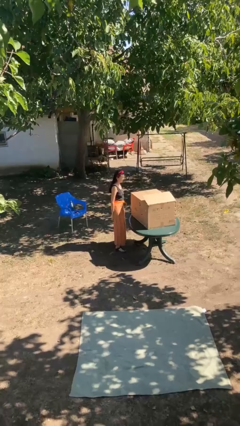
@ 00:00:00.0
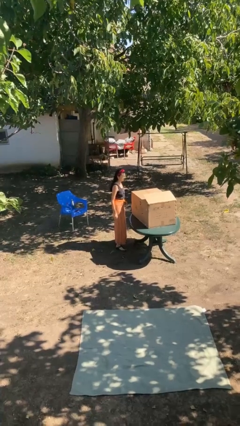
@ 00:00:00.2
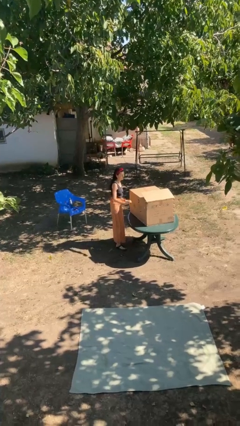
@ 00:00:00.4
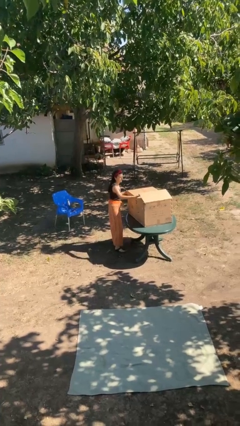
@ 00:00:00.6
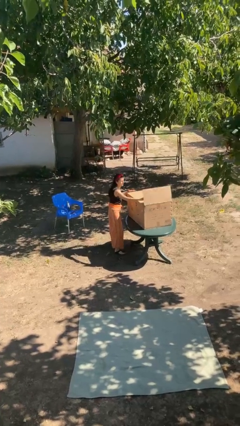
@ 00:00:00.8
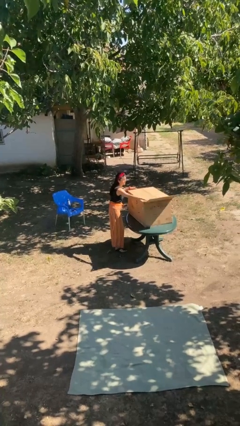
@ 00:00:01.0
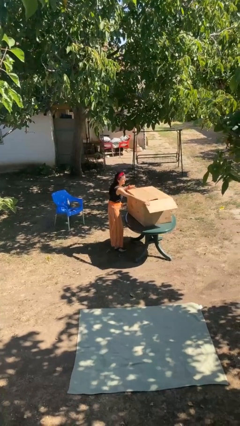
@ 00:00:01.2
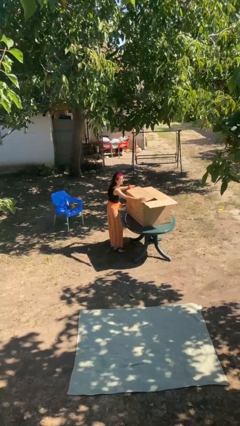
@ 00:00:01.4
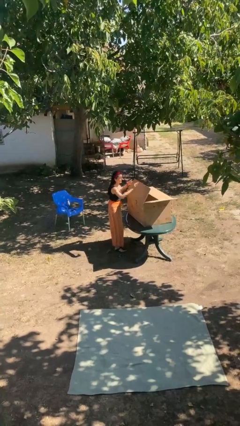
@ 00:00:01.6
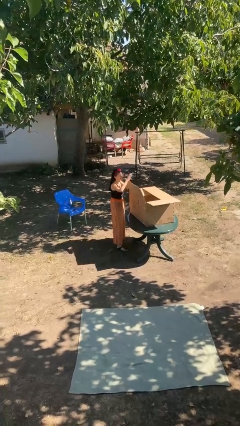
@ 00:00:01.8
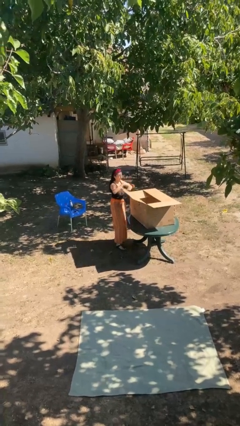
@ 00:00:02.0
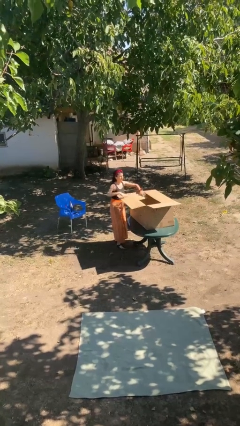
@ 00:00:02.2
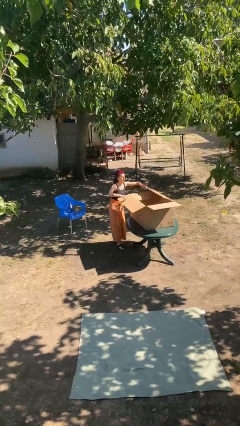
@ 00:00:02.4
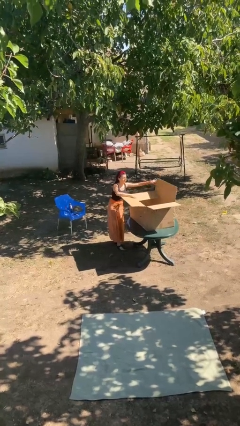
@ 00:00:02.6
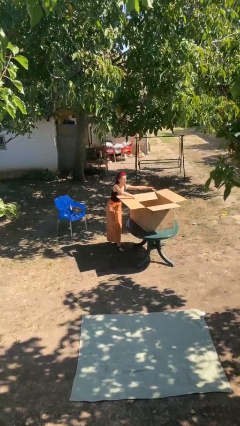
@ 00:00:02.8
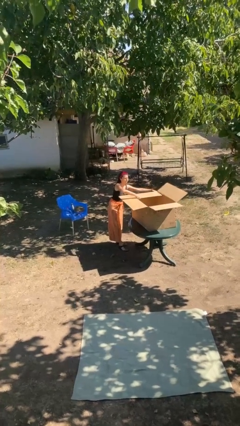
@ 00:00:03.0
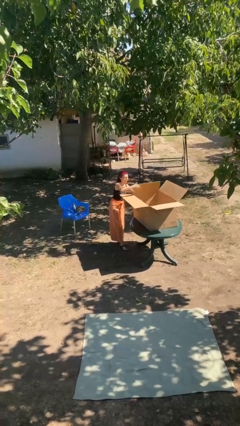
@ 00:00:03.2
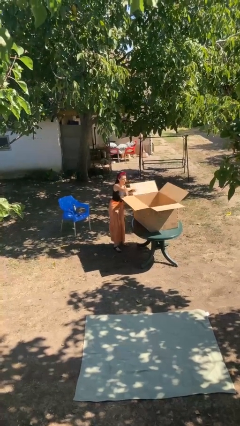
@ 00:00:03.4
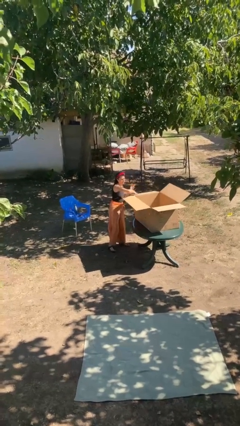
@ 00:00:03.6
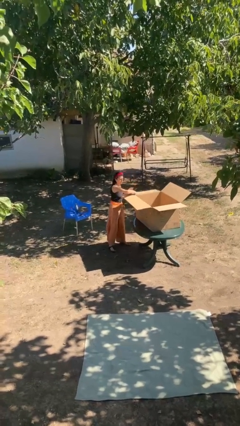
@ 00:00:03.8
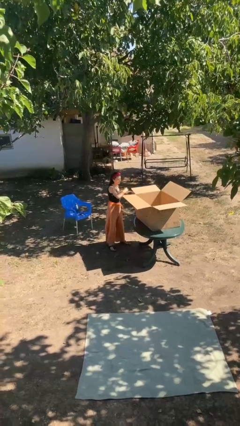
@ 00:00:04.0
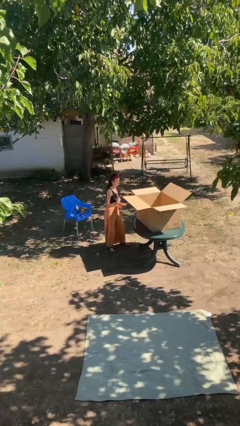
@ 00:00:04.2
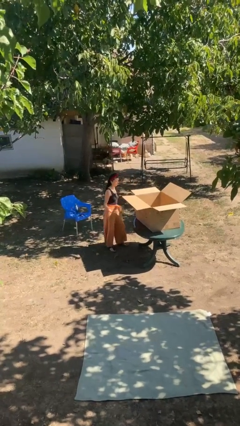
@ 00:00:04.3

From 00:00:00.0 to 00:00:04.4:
person opens box

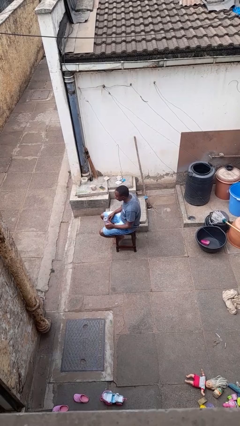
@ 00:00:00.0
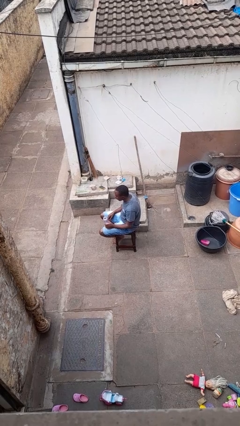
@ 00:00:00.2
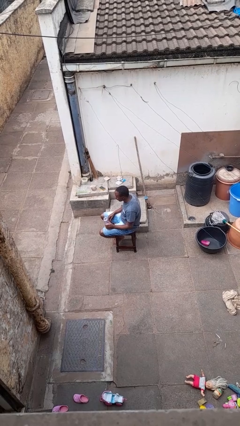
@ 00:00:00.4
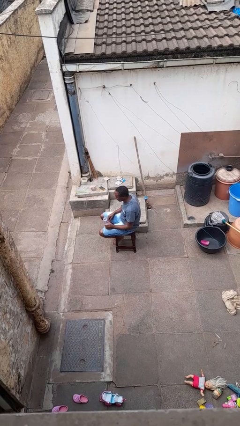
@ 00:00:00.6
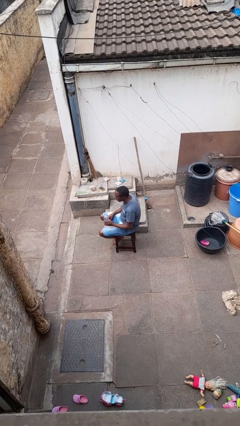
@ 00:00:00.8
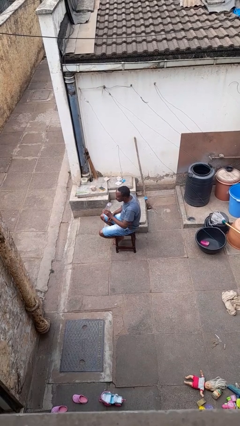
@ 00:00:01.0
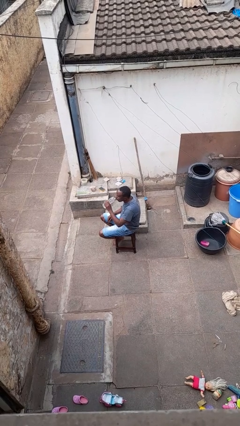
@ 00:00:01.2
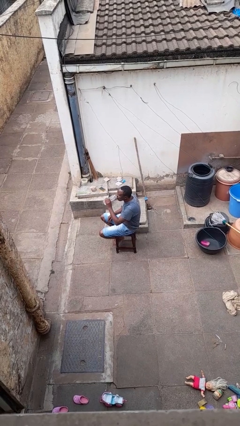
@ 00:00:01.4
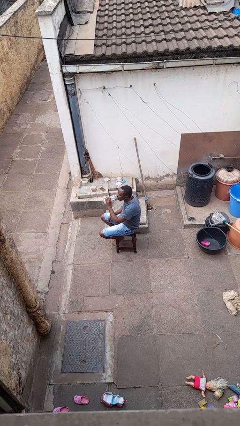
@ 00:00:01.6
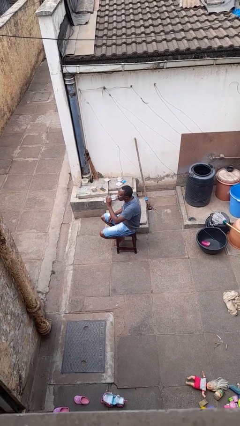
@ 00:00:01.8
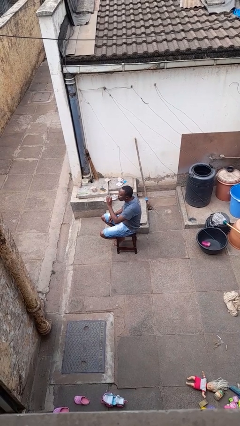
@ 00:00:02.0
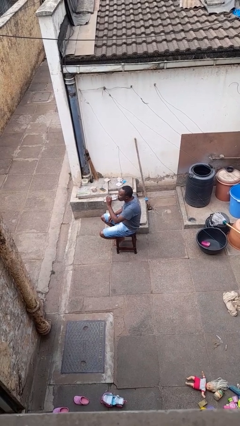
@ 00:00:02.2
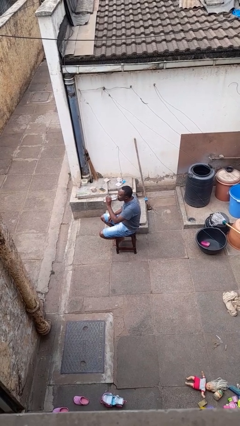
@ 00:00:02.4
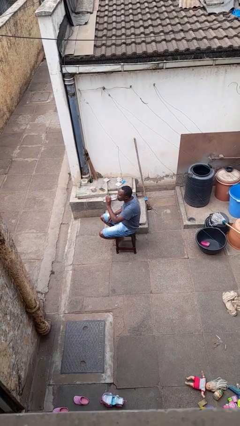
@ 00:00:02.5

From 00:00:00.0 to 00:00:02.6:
person drinks from bottle

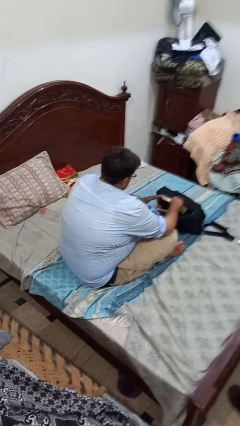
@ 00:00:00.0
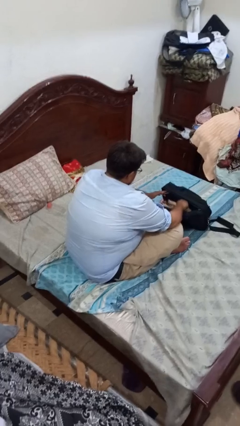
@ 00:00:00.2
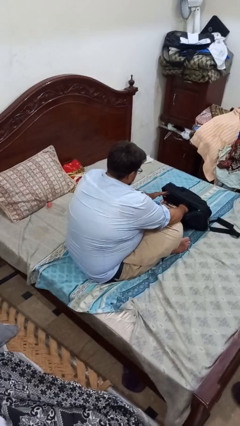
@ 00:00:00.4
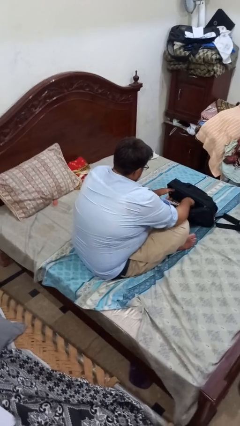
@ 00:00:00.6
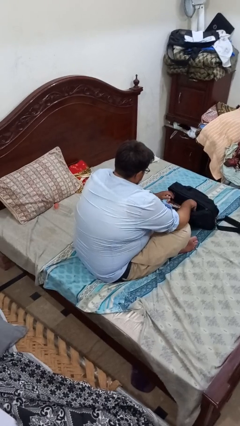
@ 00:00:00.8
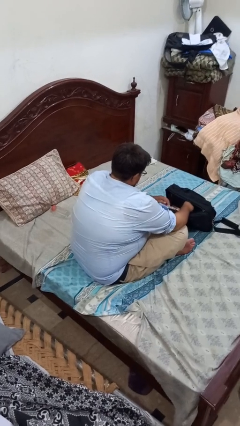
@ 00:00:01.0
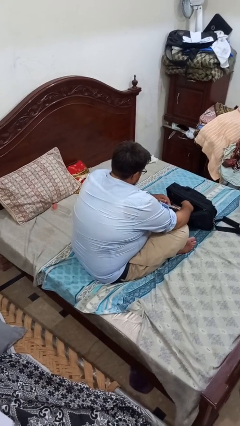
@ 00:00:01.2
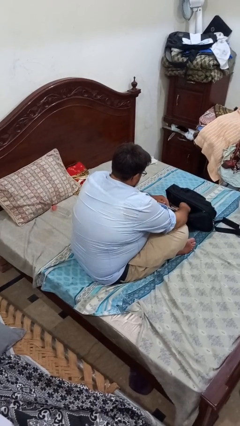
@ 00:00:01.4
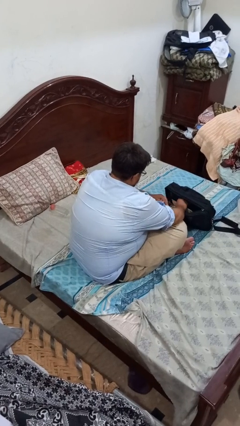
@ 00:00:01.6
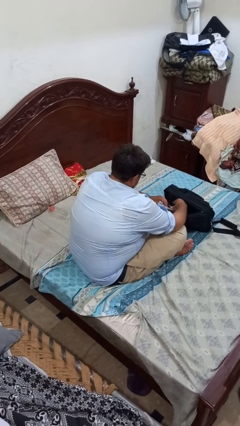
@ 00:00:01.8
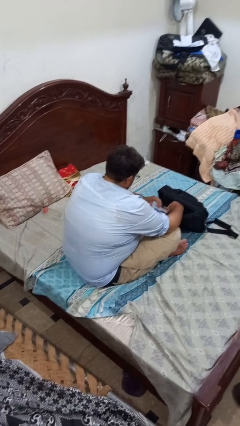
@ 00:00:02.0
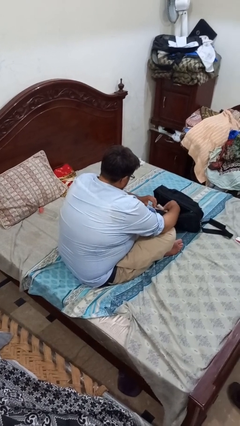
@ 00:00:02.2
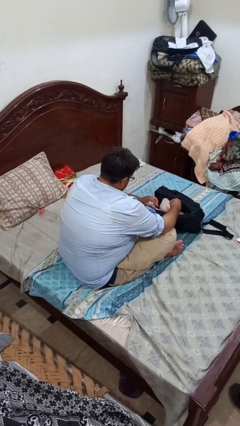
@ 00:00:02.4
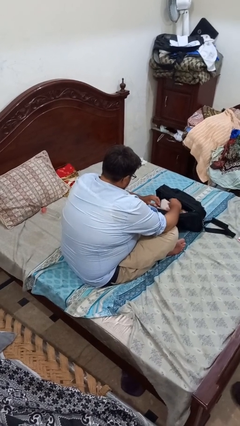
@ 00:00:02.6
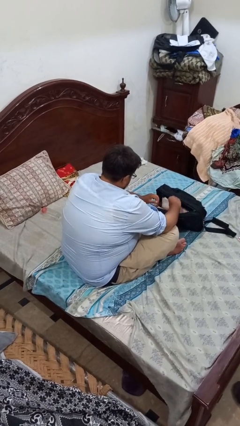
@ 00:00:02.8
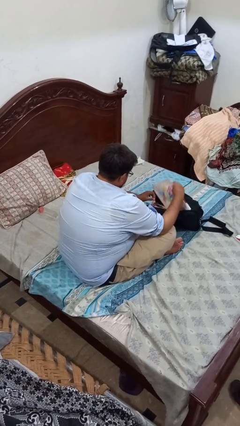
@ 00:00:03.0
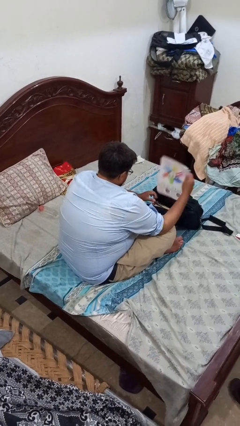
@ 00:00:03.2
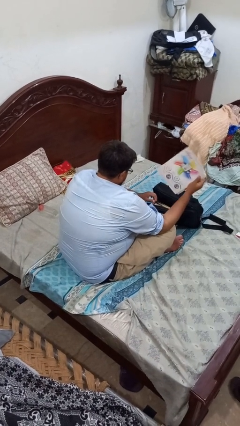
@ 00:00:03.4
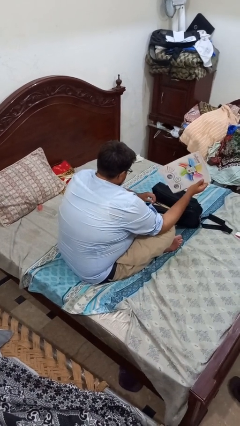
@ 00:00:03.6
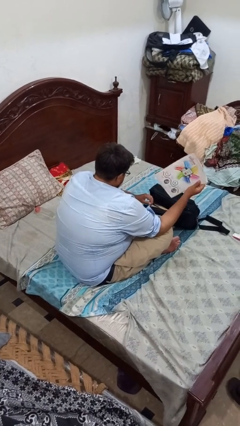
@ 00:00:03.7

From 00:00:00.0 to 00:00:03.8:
person searches in bag

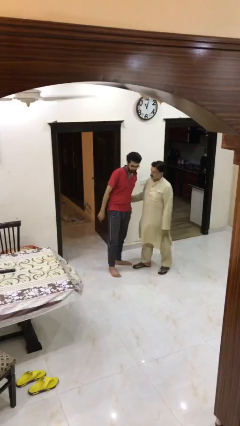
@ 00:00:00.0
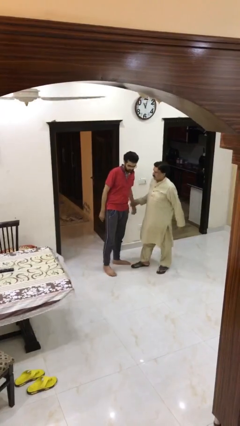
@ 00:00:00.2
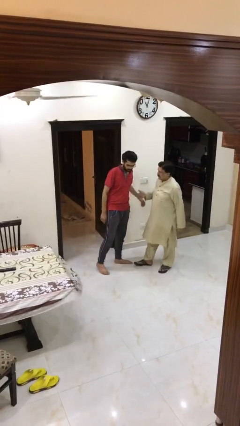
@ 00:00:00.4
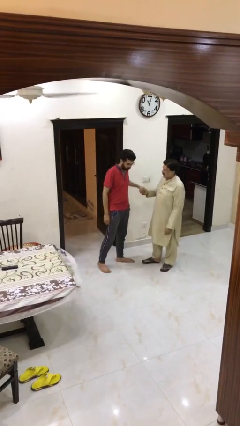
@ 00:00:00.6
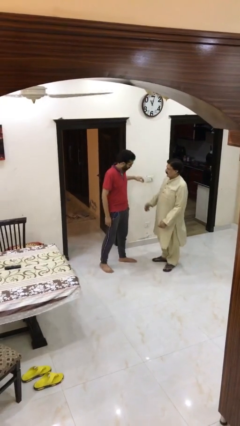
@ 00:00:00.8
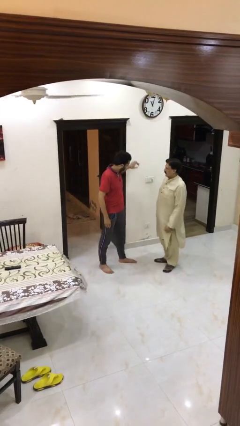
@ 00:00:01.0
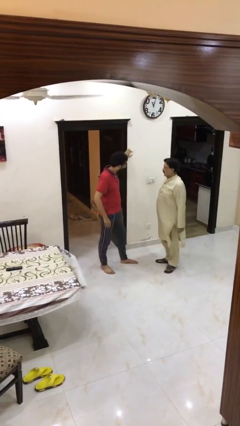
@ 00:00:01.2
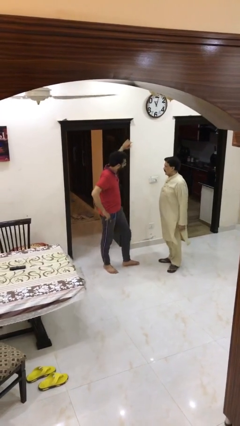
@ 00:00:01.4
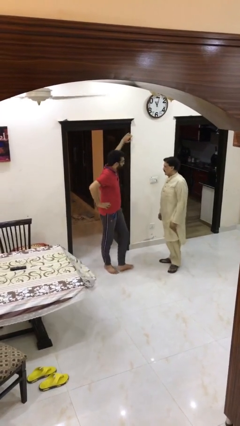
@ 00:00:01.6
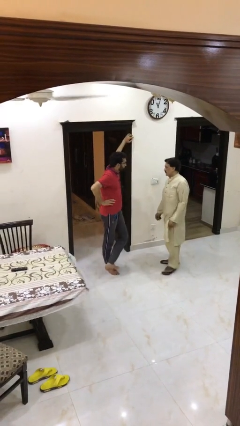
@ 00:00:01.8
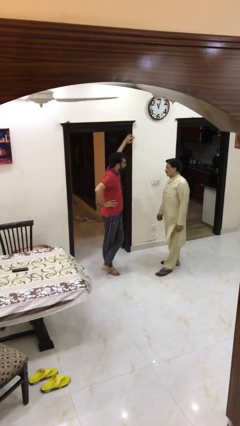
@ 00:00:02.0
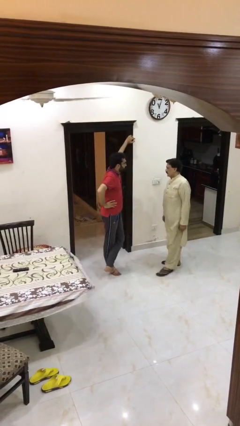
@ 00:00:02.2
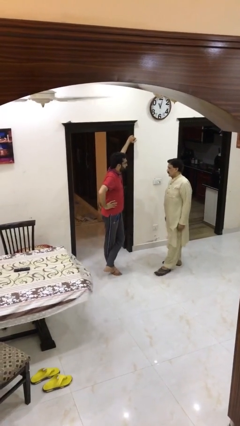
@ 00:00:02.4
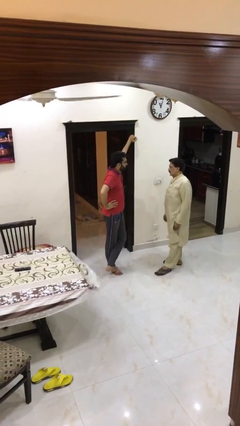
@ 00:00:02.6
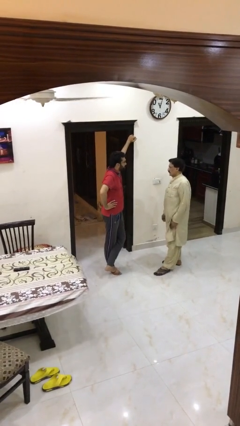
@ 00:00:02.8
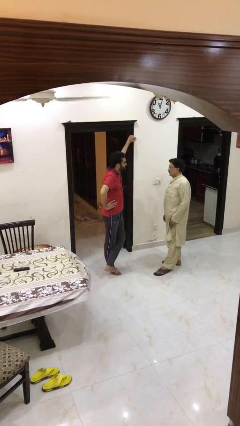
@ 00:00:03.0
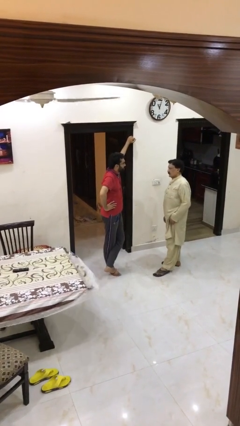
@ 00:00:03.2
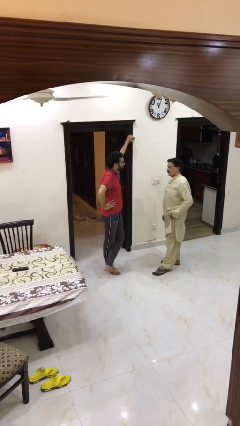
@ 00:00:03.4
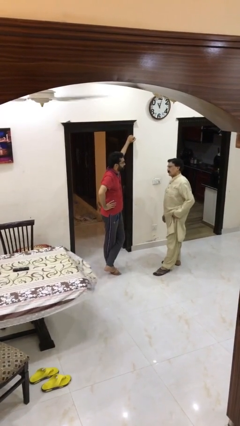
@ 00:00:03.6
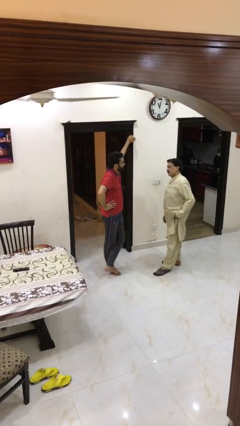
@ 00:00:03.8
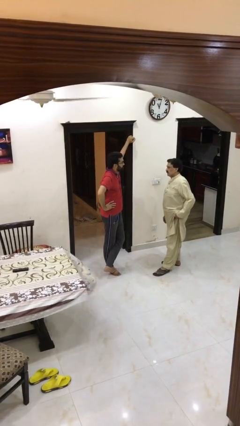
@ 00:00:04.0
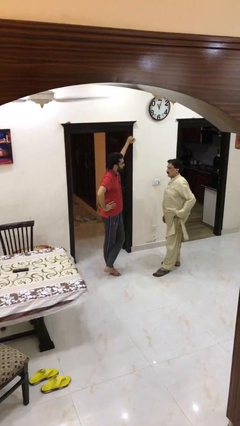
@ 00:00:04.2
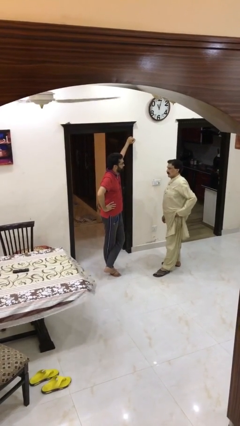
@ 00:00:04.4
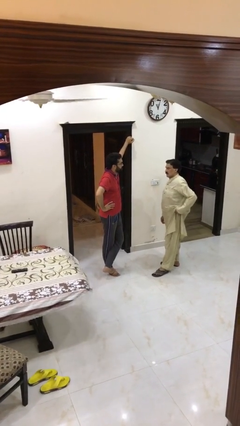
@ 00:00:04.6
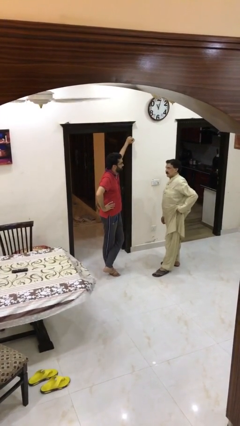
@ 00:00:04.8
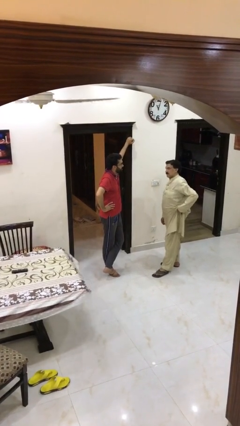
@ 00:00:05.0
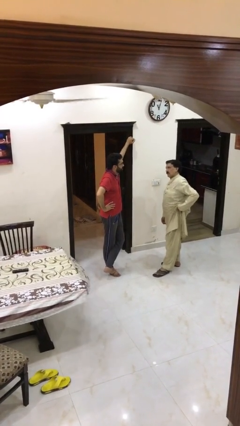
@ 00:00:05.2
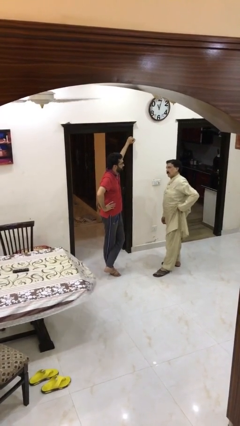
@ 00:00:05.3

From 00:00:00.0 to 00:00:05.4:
person talks to person

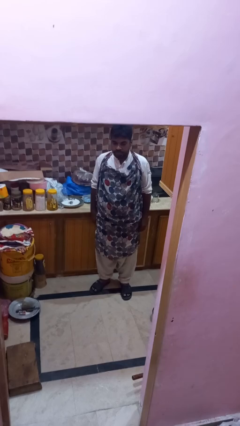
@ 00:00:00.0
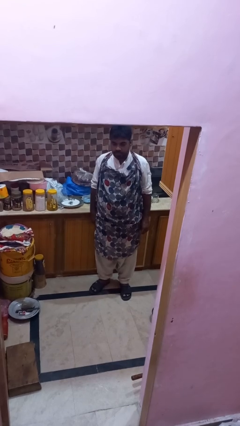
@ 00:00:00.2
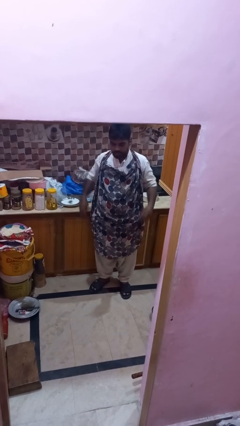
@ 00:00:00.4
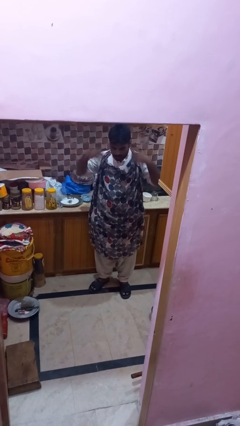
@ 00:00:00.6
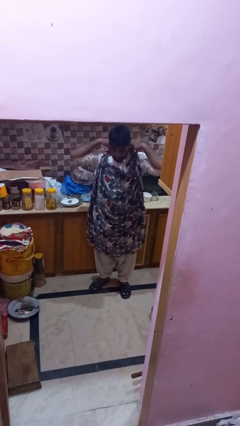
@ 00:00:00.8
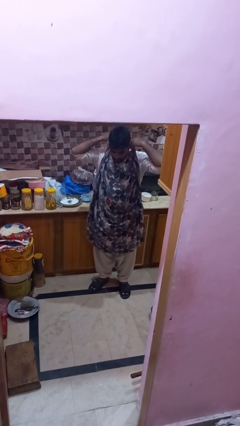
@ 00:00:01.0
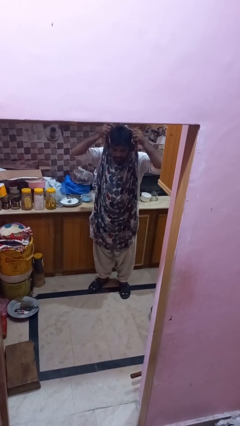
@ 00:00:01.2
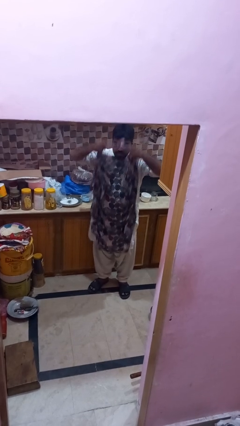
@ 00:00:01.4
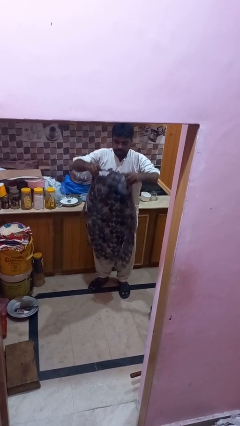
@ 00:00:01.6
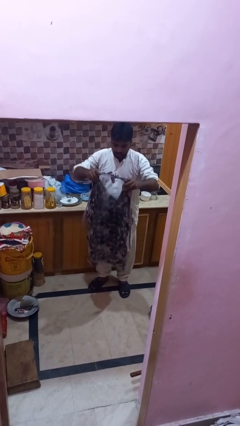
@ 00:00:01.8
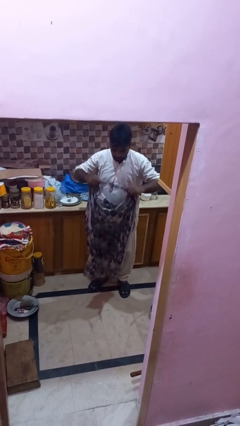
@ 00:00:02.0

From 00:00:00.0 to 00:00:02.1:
person takes off apron
